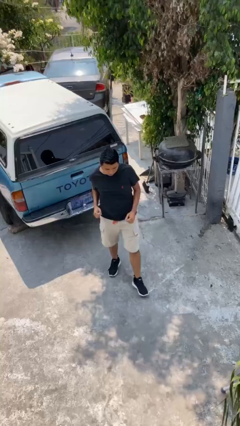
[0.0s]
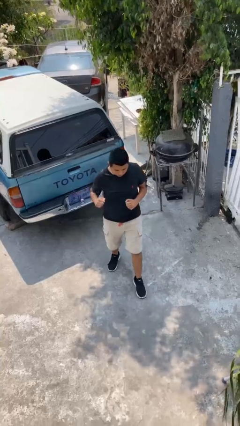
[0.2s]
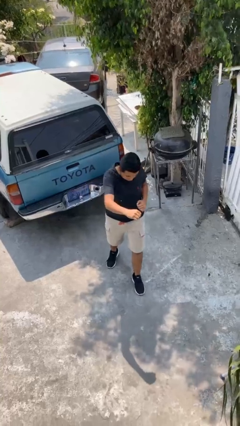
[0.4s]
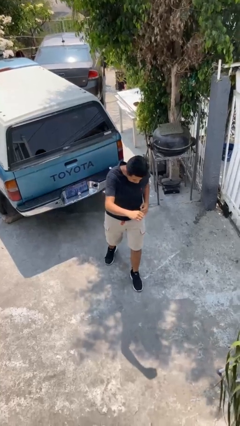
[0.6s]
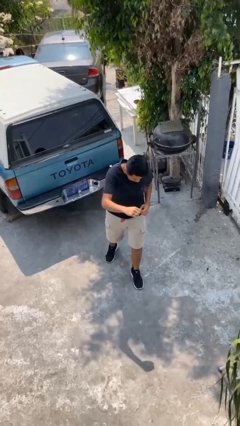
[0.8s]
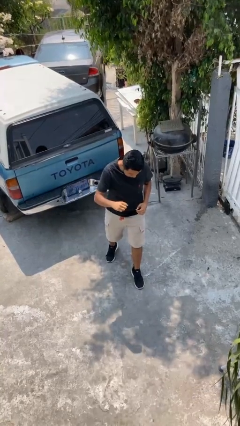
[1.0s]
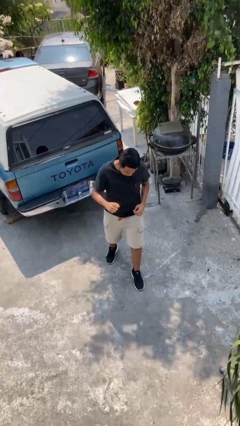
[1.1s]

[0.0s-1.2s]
person punches

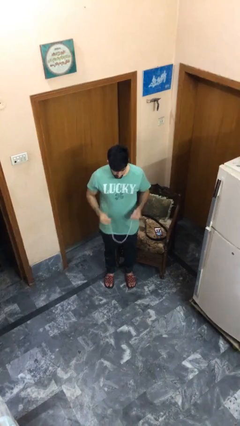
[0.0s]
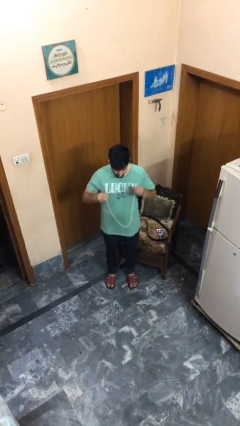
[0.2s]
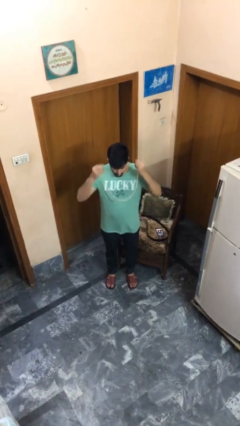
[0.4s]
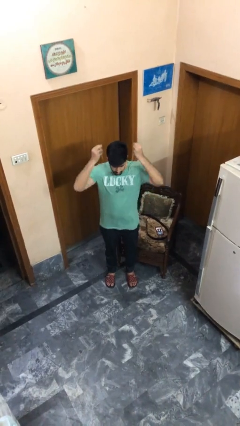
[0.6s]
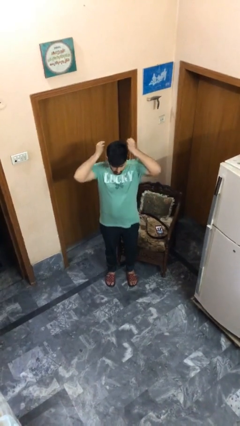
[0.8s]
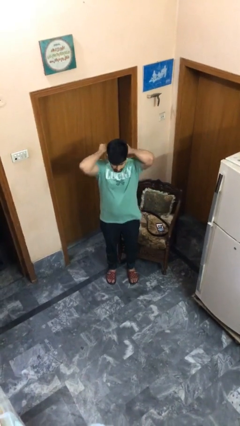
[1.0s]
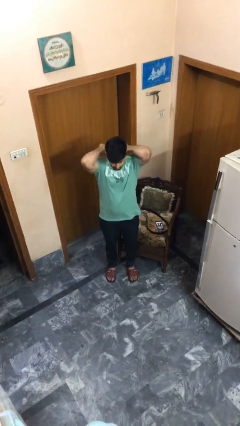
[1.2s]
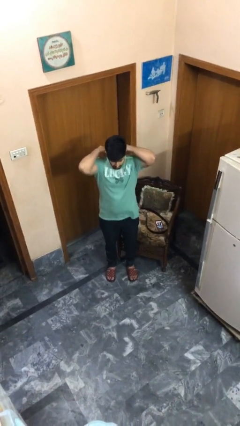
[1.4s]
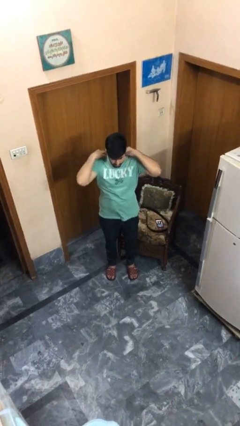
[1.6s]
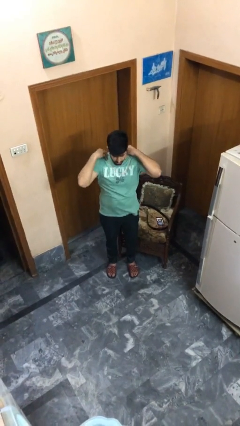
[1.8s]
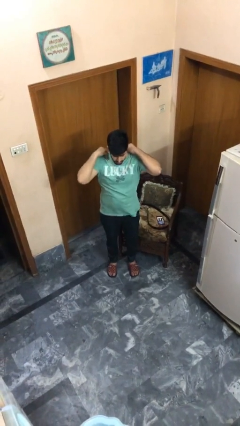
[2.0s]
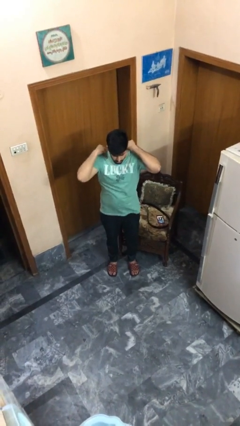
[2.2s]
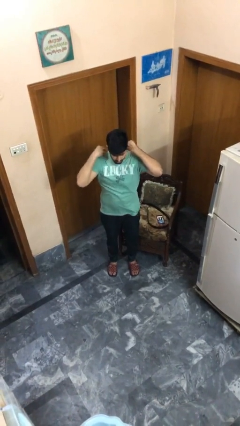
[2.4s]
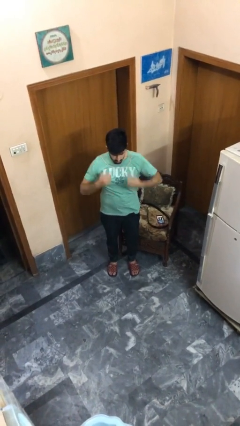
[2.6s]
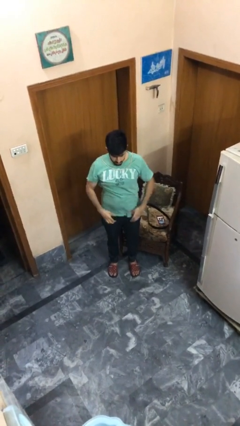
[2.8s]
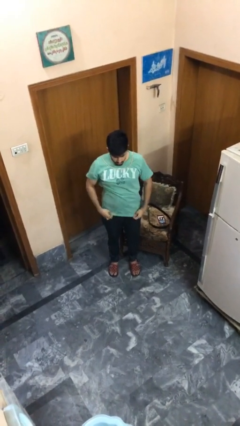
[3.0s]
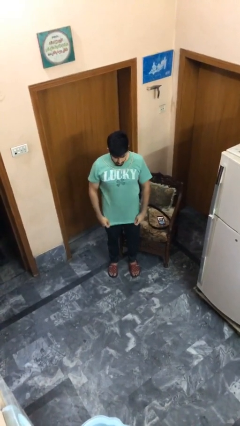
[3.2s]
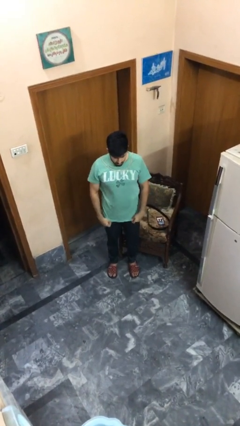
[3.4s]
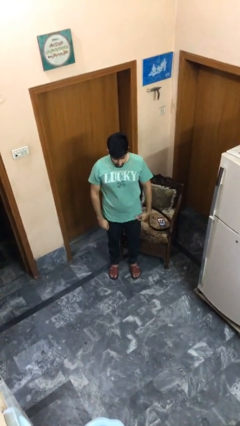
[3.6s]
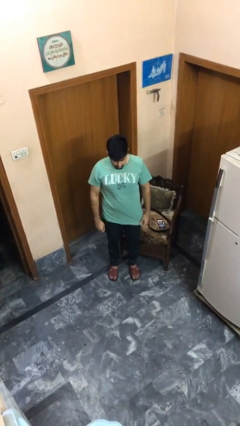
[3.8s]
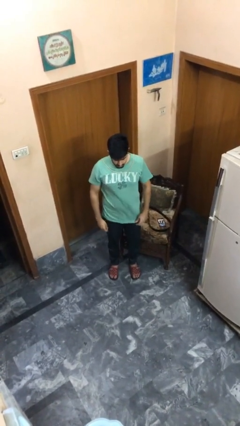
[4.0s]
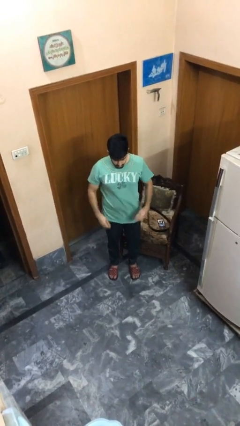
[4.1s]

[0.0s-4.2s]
person puts on necklace

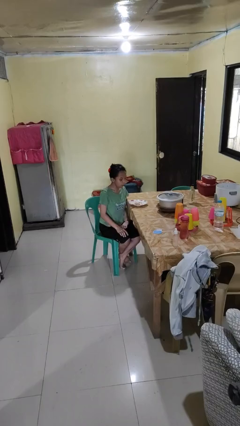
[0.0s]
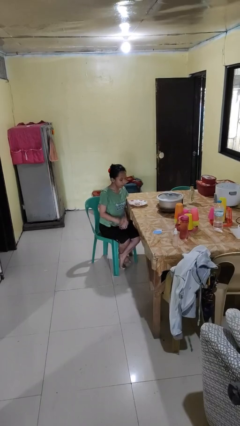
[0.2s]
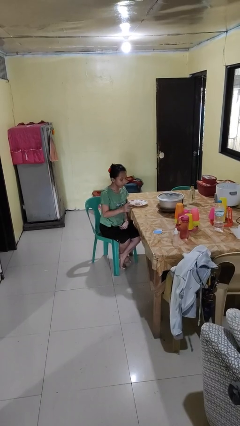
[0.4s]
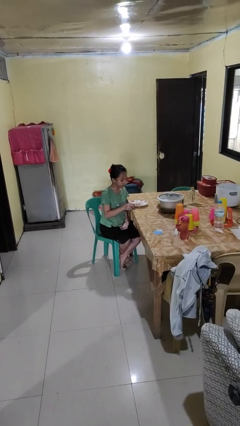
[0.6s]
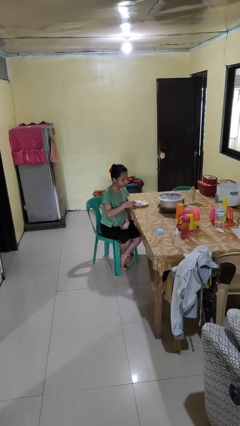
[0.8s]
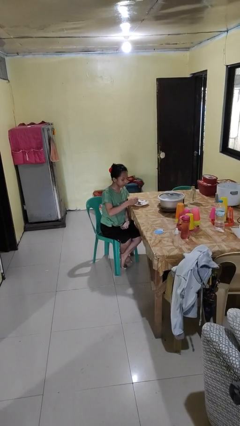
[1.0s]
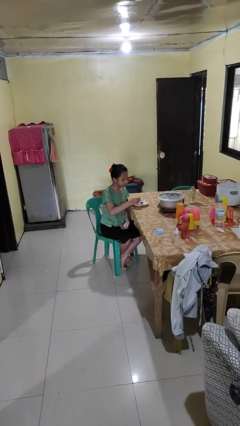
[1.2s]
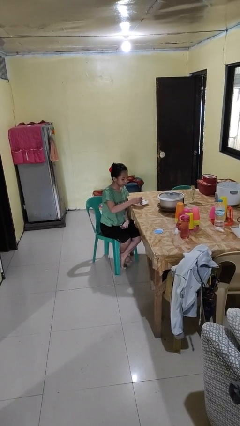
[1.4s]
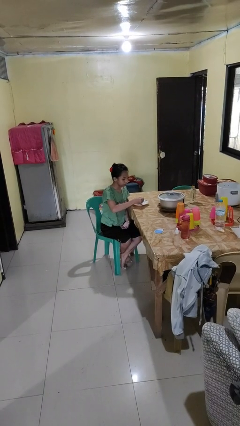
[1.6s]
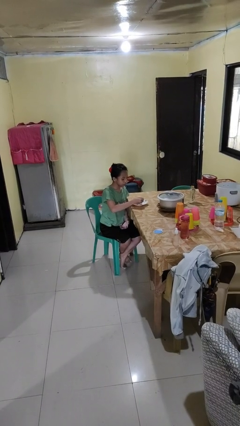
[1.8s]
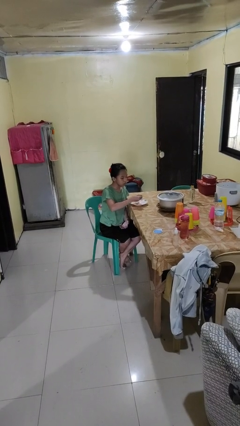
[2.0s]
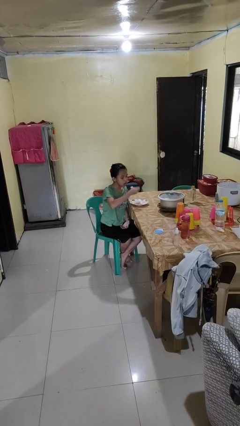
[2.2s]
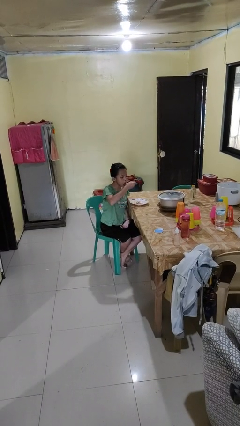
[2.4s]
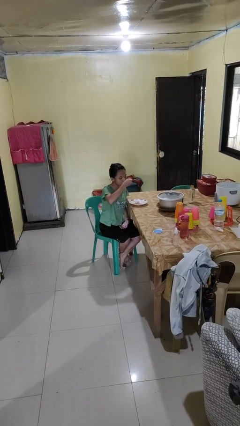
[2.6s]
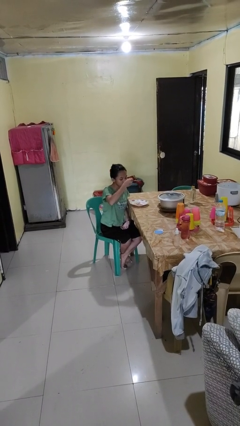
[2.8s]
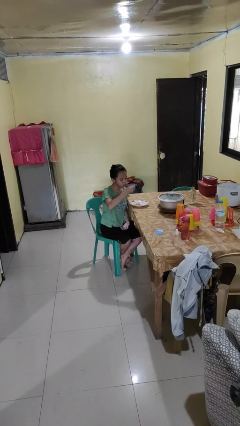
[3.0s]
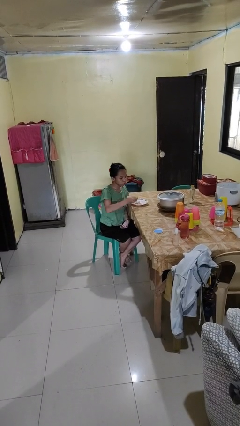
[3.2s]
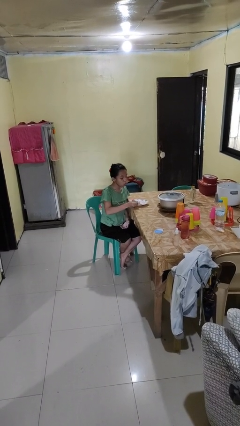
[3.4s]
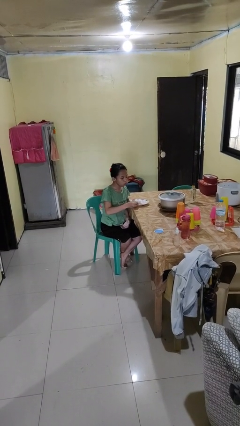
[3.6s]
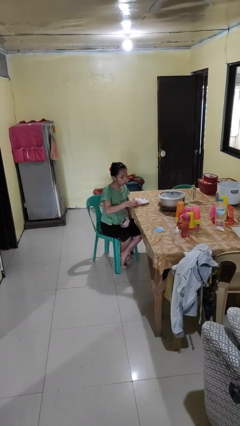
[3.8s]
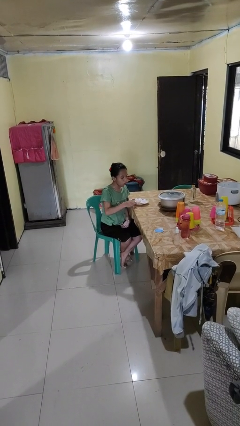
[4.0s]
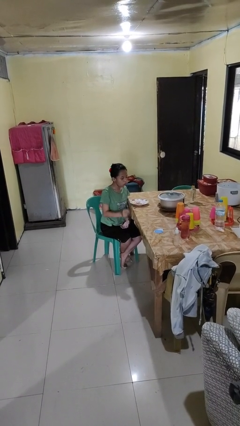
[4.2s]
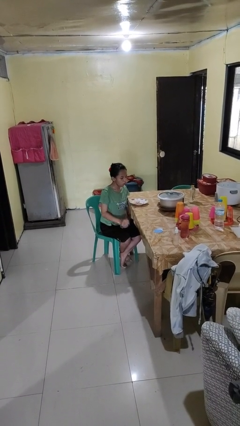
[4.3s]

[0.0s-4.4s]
person eats with utensil

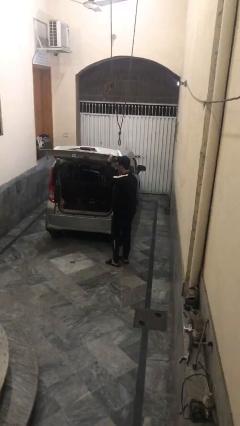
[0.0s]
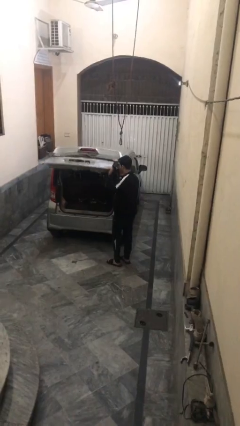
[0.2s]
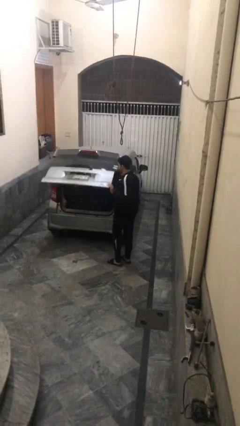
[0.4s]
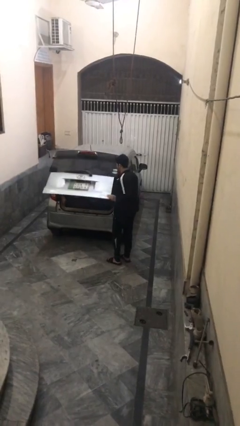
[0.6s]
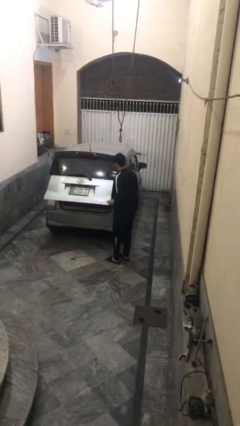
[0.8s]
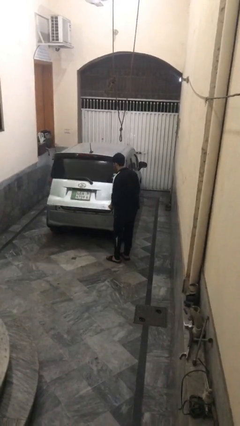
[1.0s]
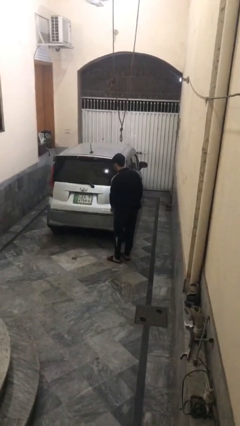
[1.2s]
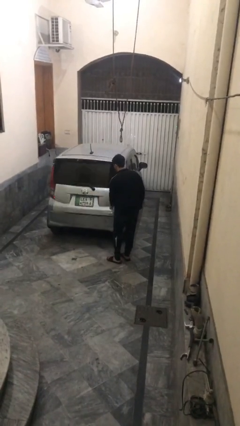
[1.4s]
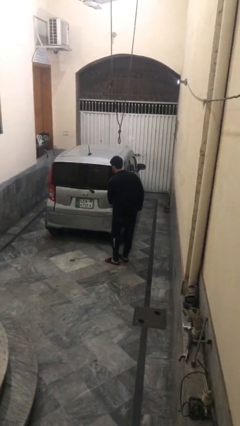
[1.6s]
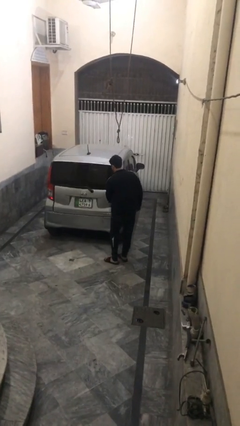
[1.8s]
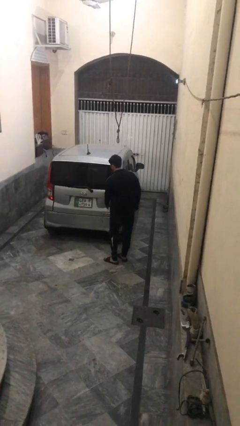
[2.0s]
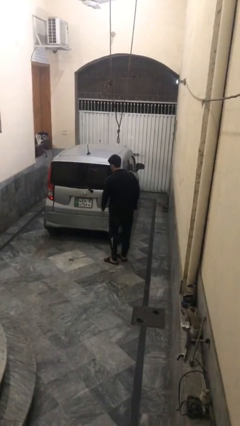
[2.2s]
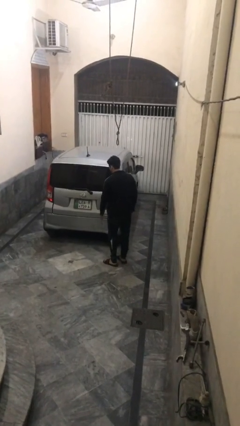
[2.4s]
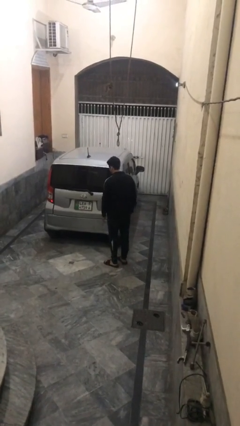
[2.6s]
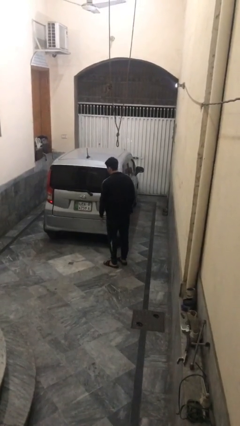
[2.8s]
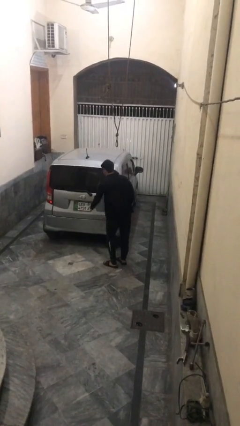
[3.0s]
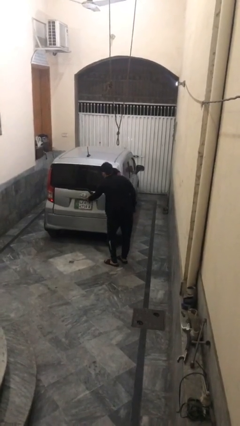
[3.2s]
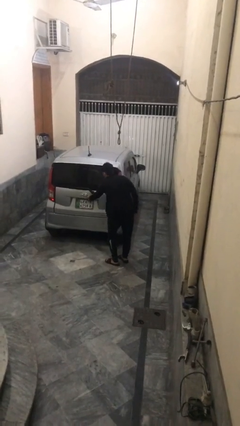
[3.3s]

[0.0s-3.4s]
person closes car trunk

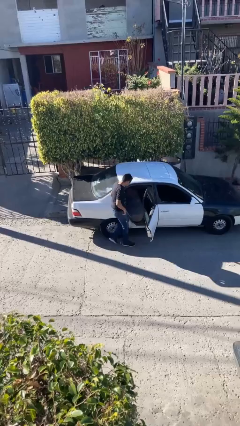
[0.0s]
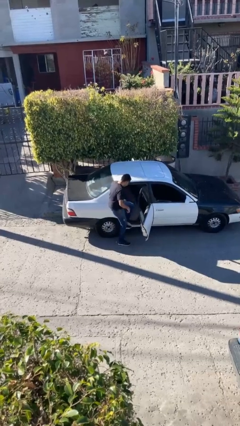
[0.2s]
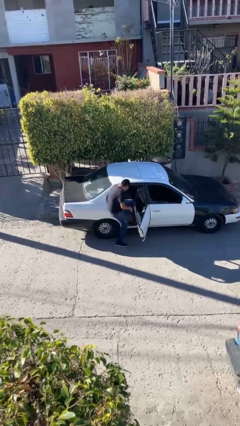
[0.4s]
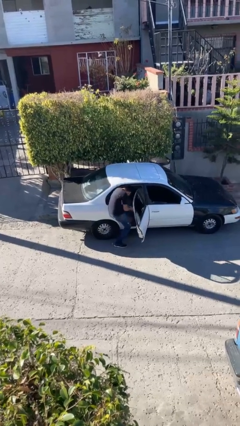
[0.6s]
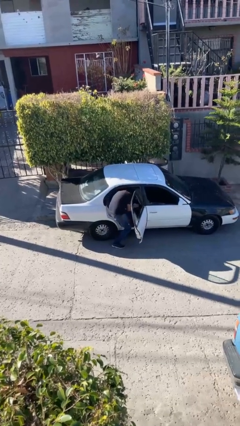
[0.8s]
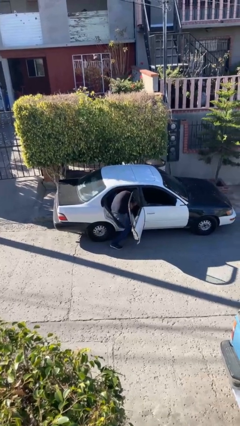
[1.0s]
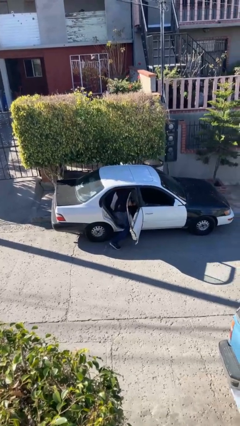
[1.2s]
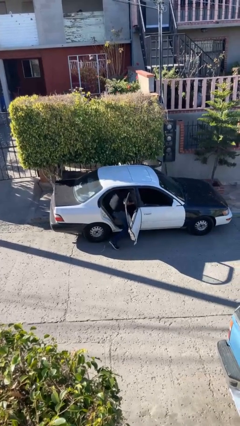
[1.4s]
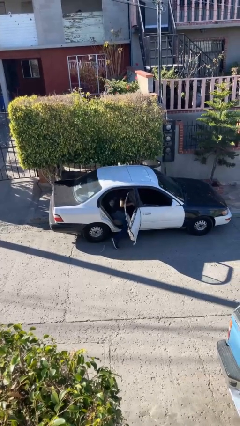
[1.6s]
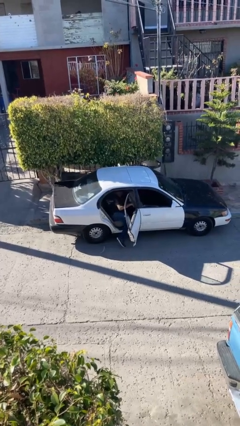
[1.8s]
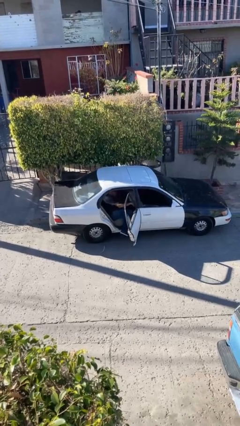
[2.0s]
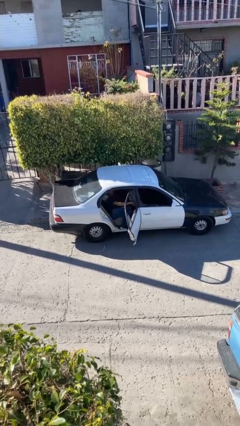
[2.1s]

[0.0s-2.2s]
person enters car

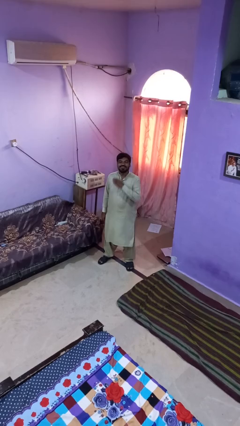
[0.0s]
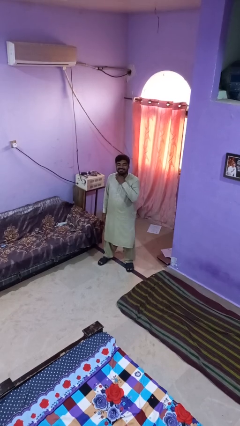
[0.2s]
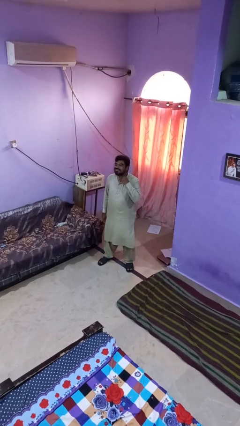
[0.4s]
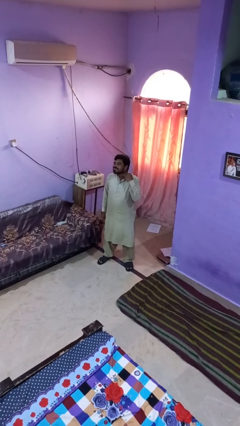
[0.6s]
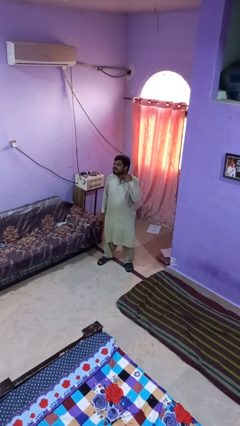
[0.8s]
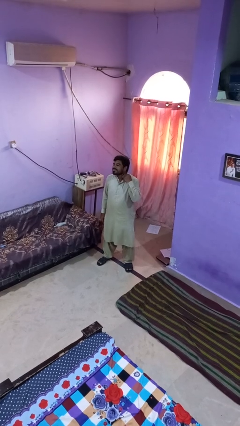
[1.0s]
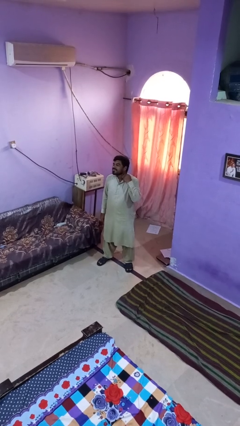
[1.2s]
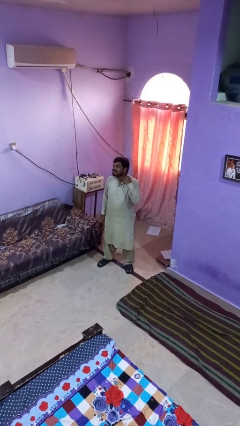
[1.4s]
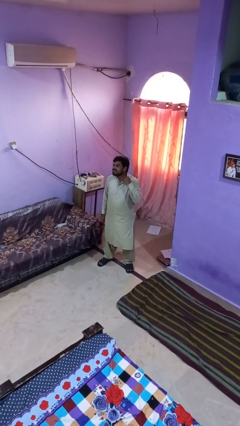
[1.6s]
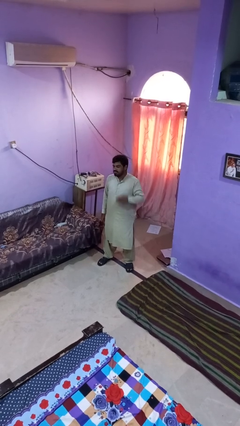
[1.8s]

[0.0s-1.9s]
person gestures cut
